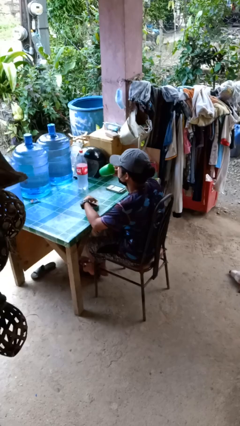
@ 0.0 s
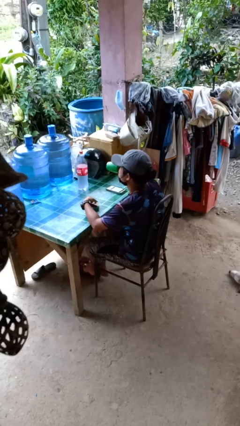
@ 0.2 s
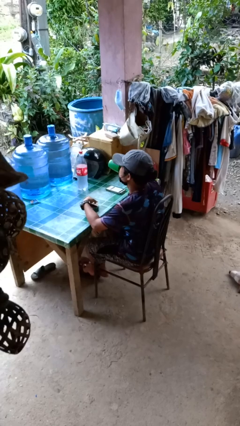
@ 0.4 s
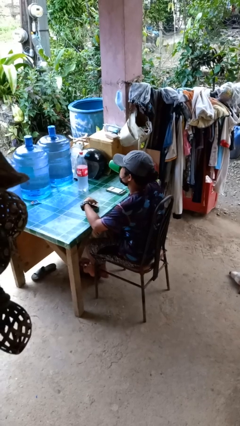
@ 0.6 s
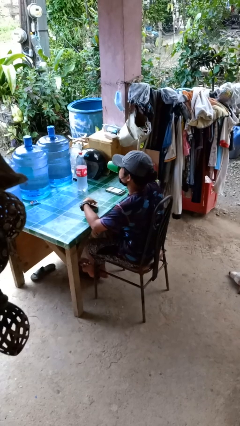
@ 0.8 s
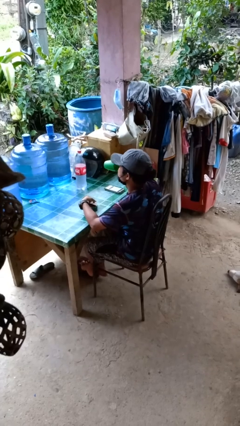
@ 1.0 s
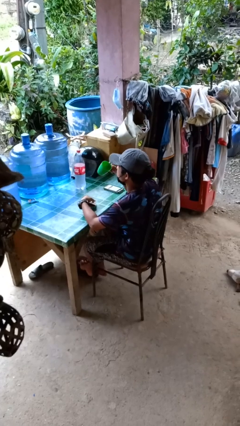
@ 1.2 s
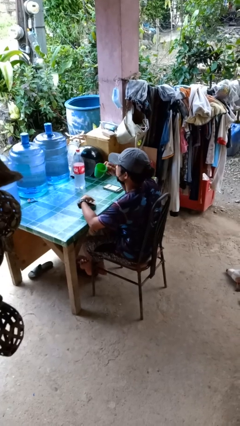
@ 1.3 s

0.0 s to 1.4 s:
person drinks from cup

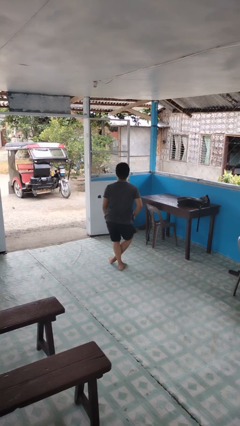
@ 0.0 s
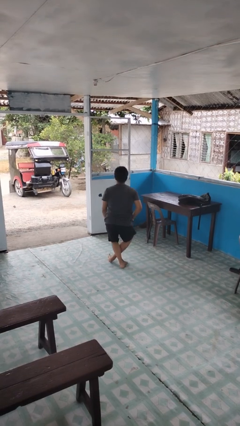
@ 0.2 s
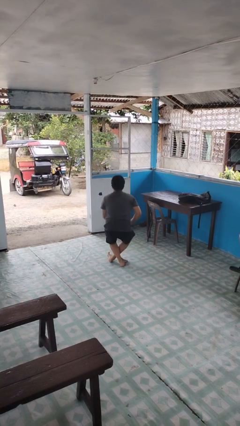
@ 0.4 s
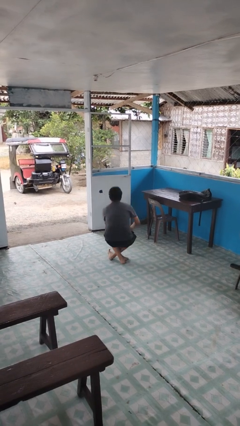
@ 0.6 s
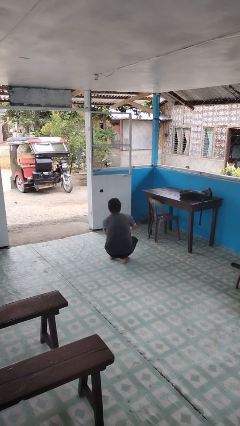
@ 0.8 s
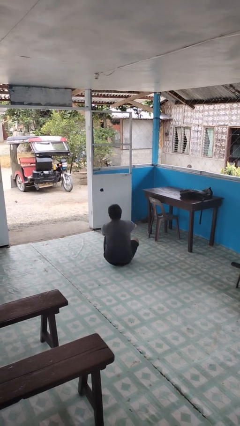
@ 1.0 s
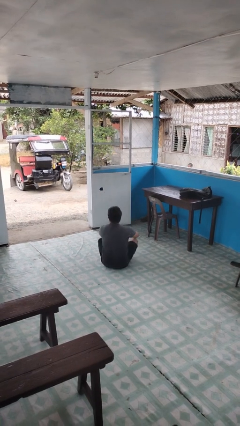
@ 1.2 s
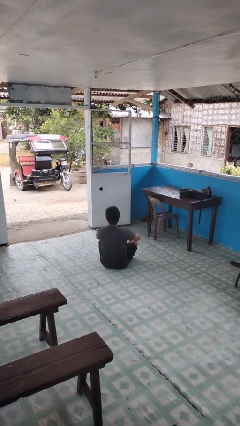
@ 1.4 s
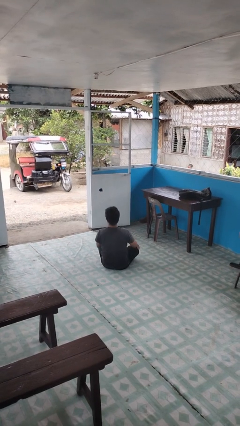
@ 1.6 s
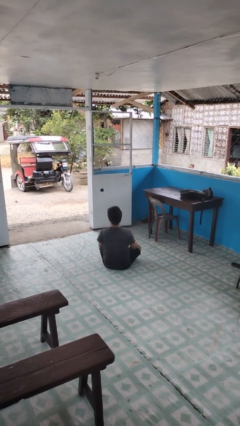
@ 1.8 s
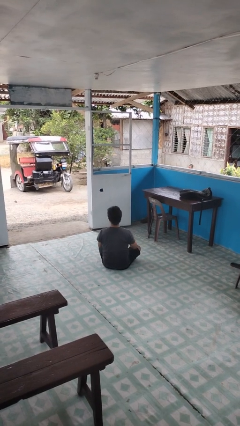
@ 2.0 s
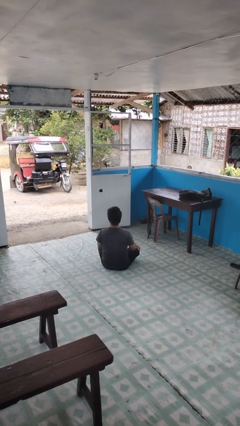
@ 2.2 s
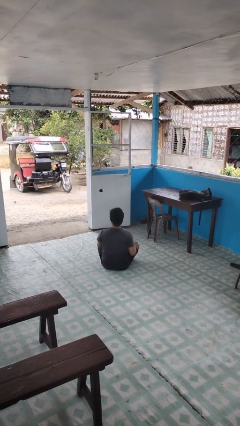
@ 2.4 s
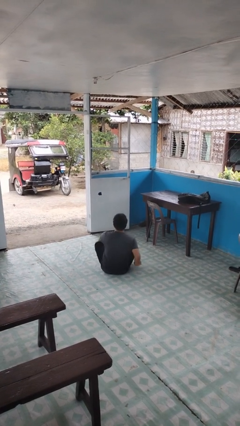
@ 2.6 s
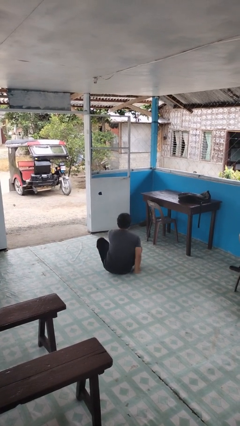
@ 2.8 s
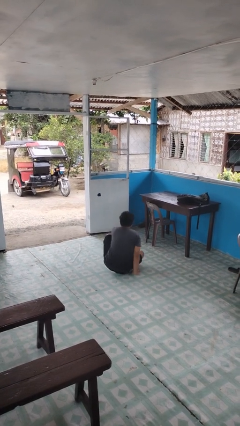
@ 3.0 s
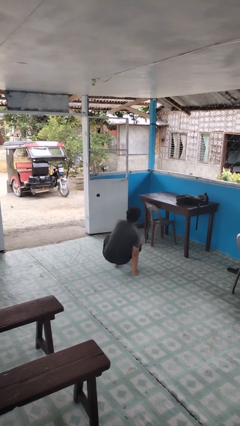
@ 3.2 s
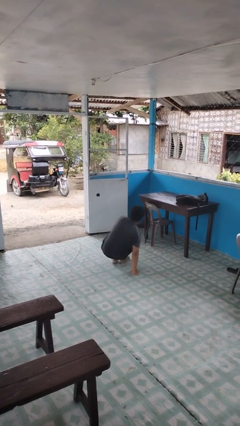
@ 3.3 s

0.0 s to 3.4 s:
person sits crisscross

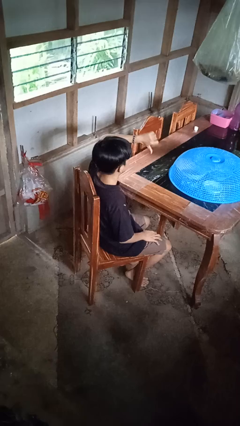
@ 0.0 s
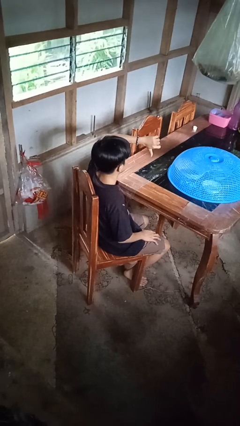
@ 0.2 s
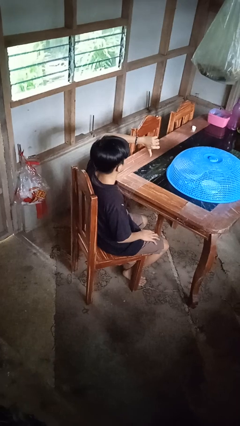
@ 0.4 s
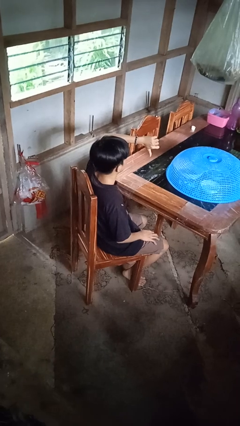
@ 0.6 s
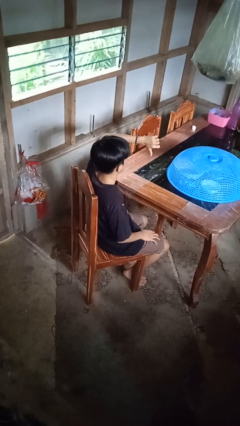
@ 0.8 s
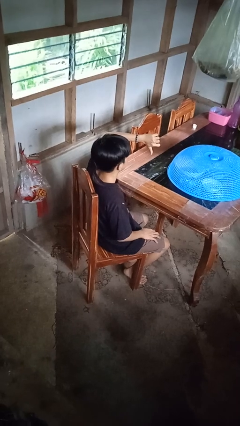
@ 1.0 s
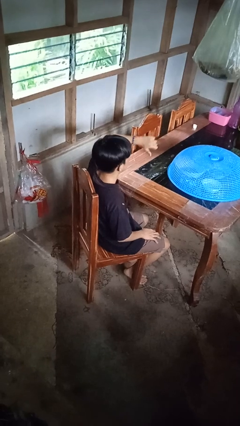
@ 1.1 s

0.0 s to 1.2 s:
person gestures thumbs down

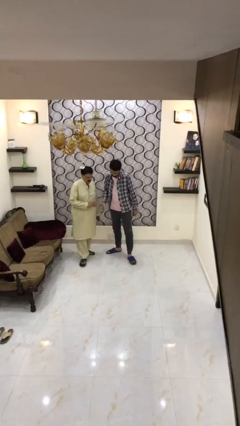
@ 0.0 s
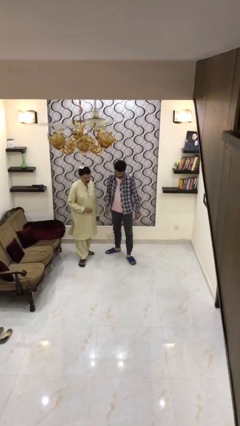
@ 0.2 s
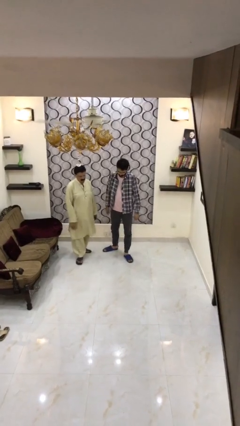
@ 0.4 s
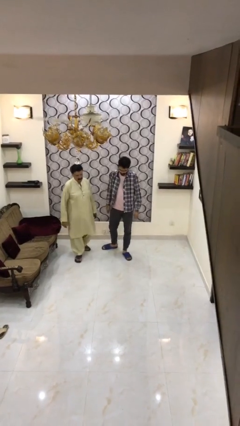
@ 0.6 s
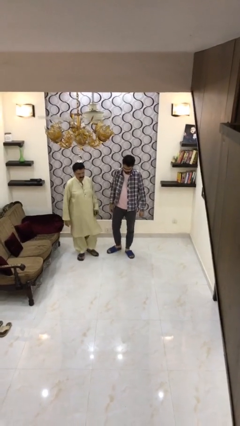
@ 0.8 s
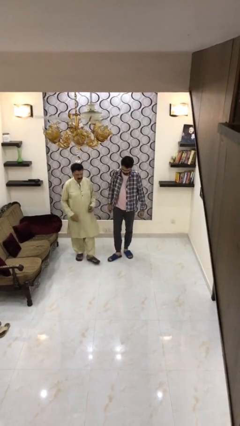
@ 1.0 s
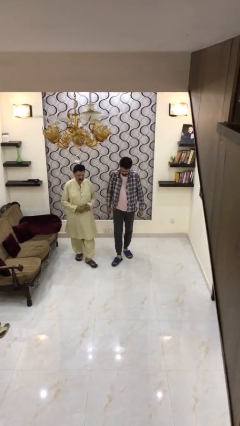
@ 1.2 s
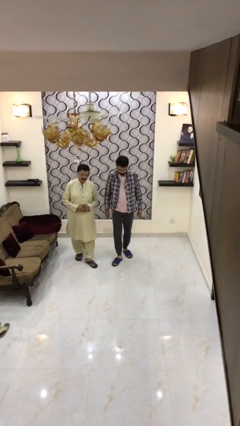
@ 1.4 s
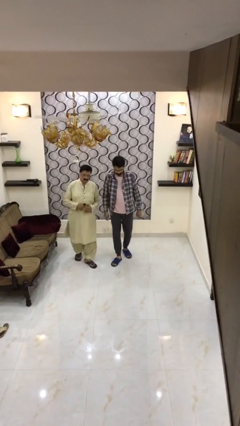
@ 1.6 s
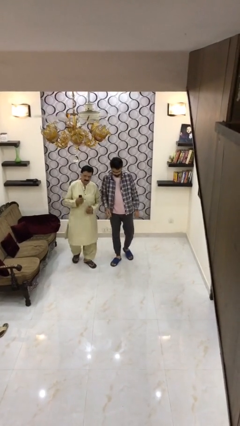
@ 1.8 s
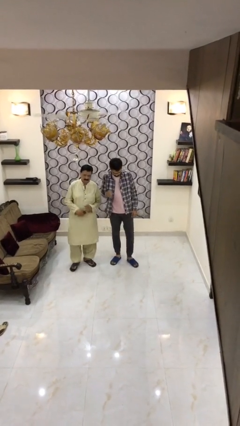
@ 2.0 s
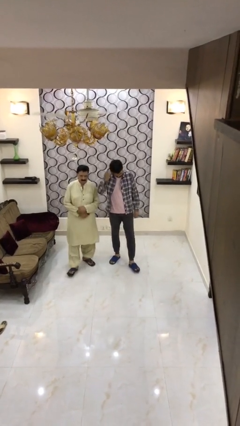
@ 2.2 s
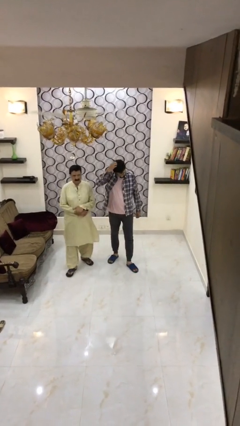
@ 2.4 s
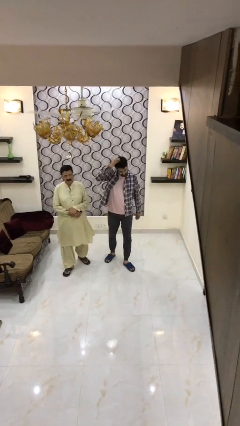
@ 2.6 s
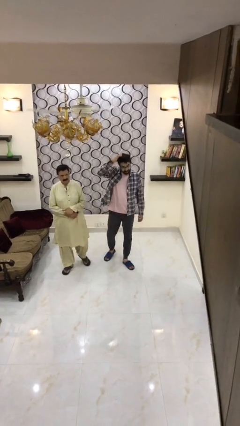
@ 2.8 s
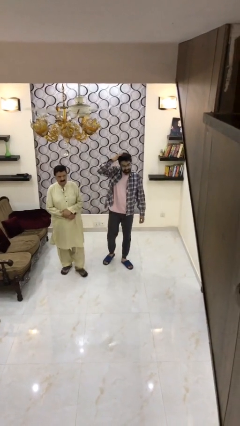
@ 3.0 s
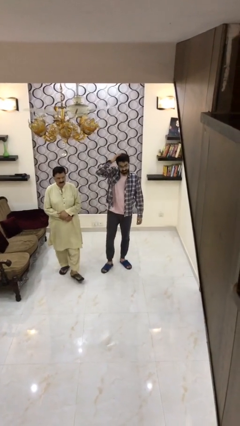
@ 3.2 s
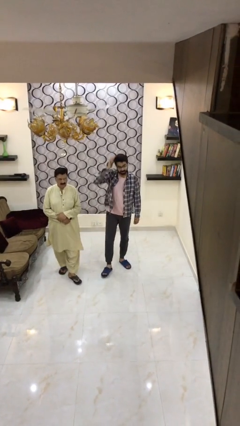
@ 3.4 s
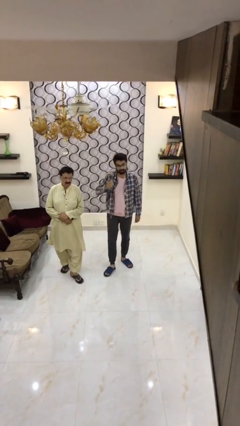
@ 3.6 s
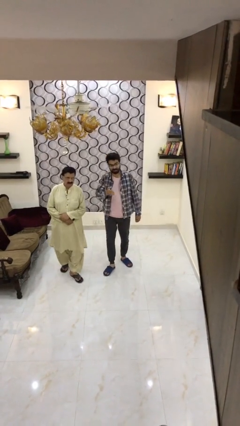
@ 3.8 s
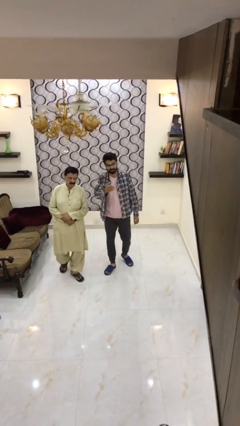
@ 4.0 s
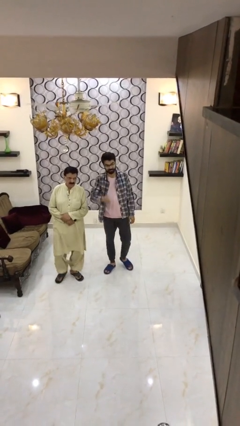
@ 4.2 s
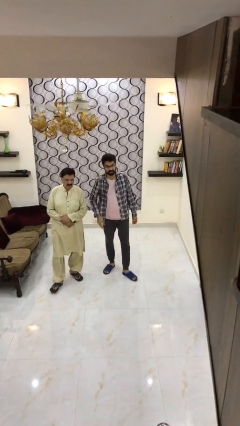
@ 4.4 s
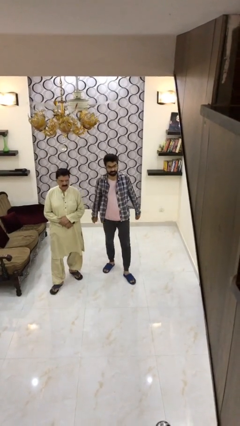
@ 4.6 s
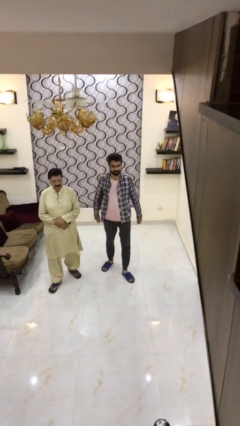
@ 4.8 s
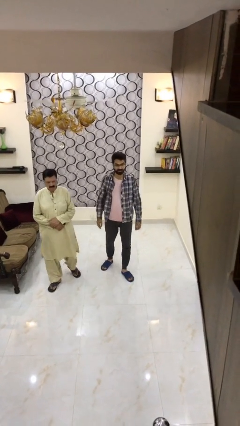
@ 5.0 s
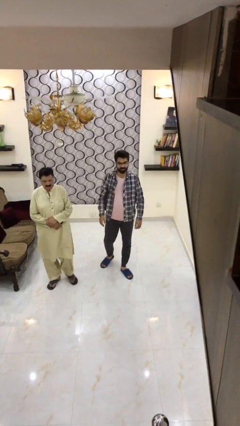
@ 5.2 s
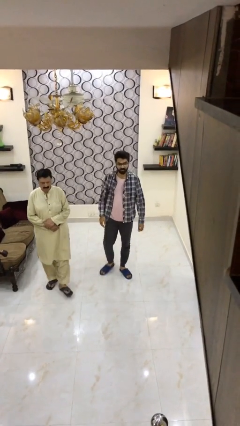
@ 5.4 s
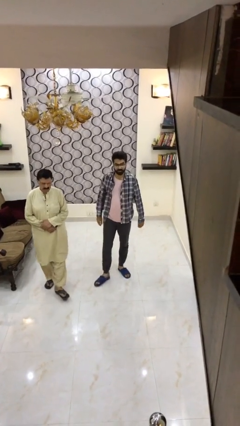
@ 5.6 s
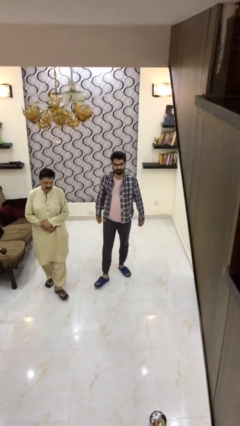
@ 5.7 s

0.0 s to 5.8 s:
person talks to person

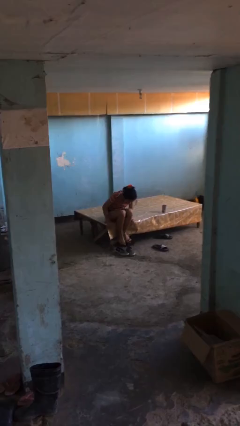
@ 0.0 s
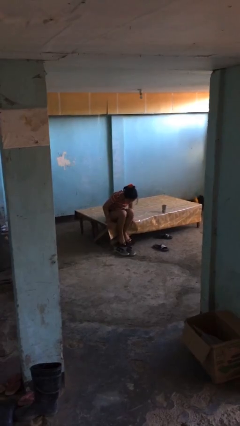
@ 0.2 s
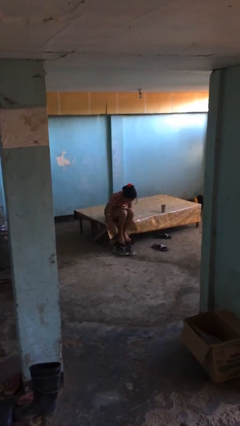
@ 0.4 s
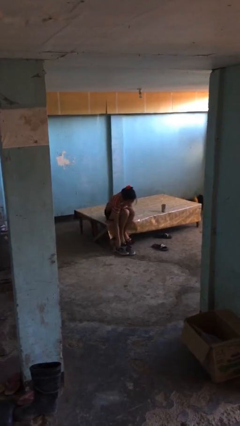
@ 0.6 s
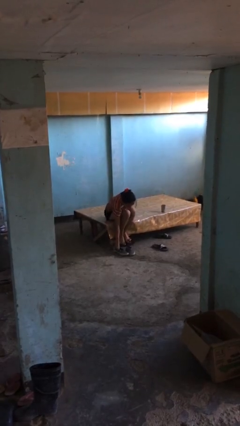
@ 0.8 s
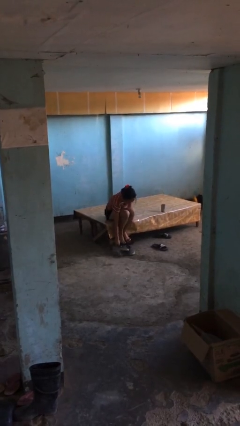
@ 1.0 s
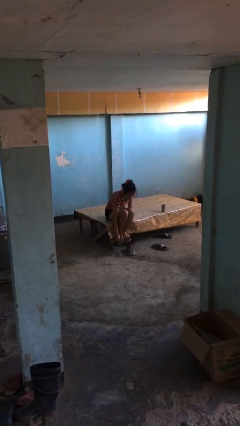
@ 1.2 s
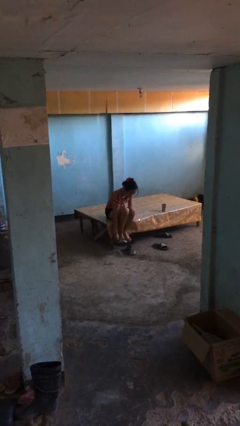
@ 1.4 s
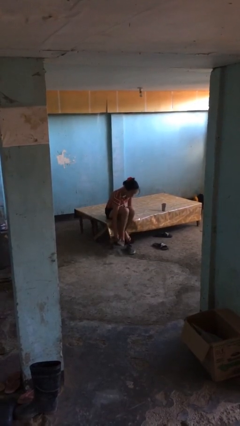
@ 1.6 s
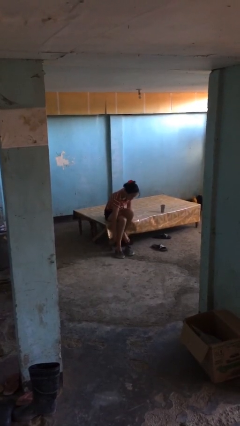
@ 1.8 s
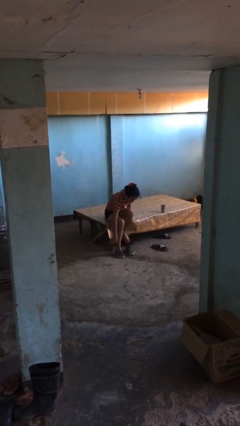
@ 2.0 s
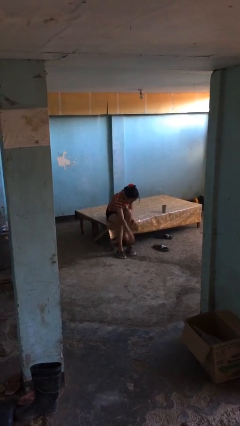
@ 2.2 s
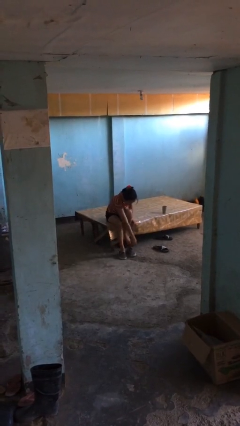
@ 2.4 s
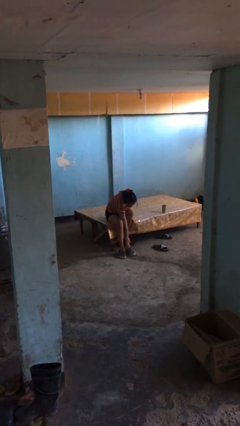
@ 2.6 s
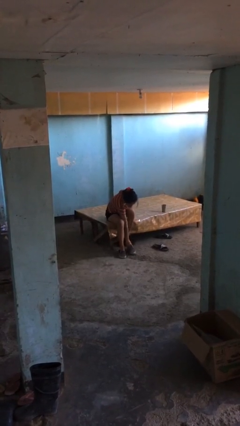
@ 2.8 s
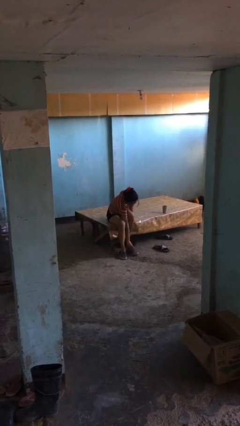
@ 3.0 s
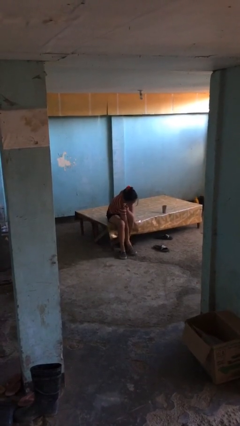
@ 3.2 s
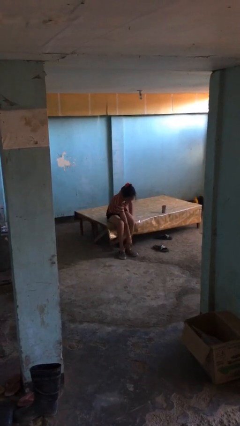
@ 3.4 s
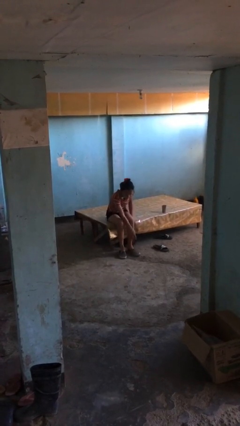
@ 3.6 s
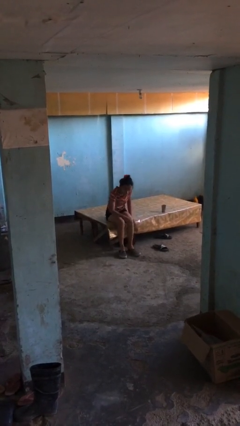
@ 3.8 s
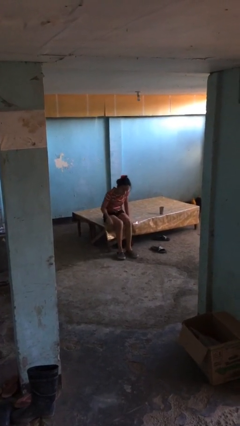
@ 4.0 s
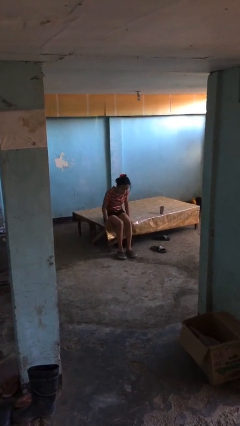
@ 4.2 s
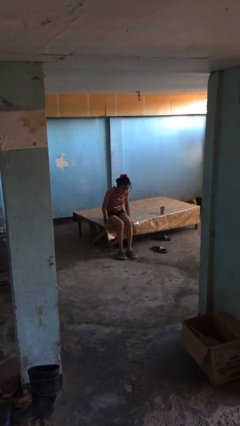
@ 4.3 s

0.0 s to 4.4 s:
person puts on shoes

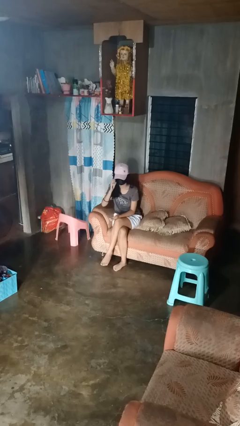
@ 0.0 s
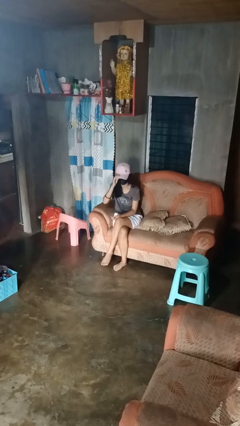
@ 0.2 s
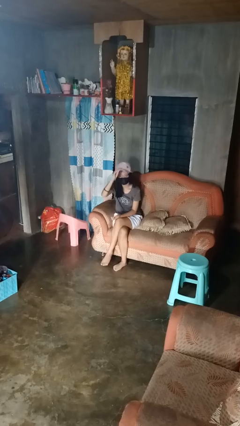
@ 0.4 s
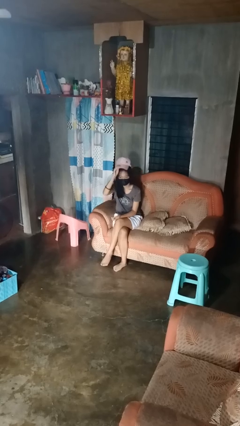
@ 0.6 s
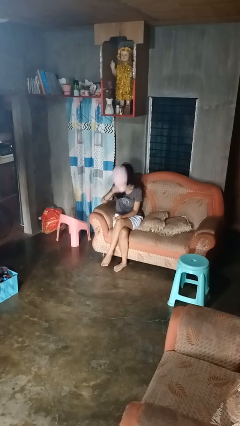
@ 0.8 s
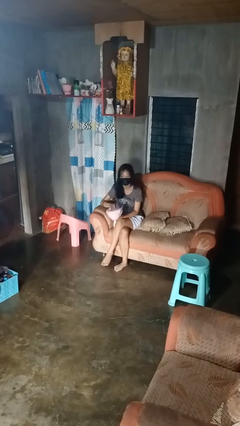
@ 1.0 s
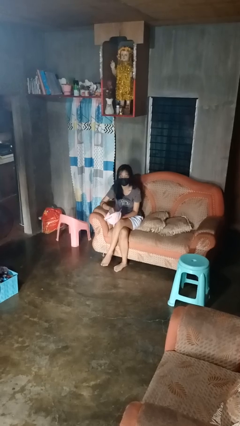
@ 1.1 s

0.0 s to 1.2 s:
person takes off hat
